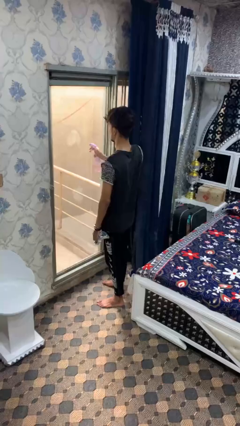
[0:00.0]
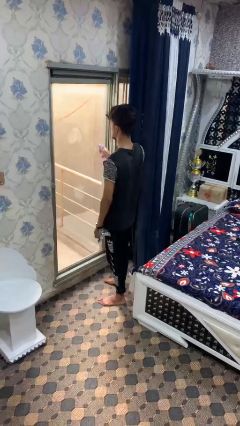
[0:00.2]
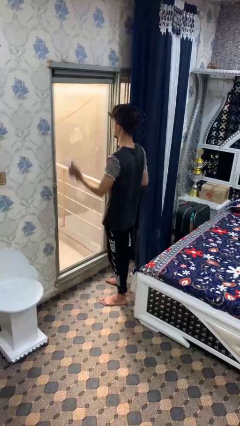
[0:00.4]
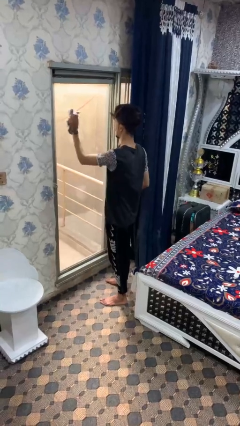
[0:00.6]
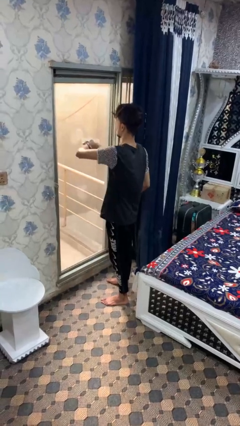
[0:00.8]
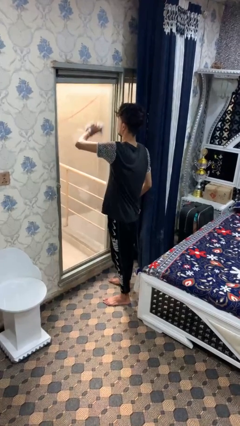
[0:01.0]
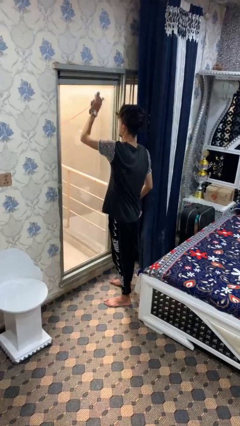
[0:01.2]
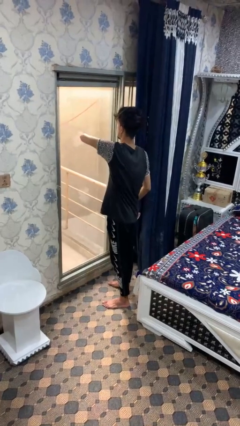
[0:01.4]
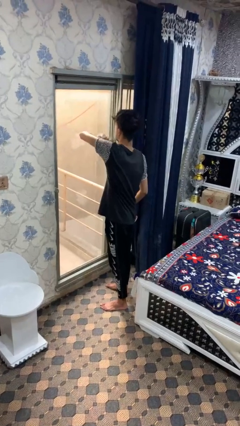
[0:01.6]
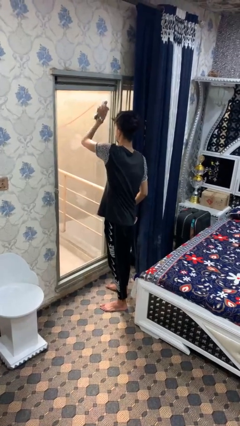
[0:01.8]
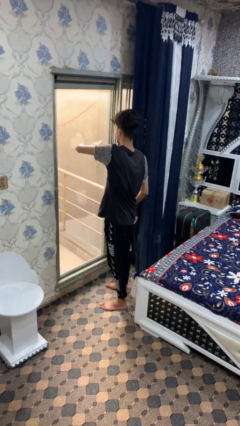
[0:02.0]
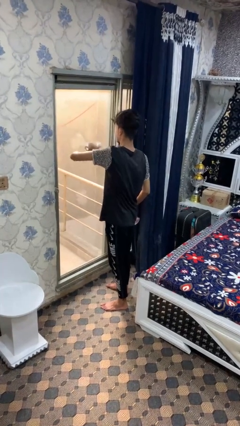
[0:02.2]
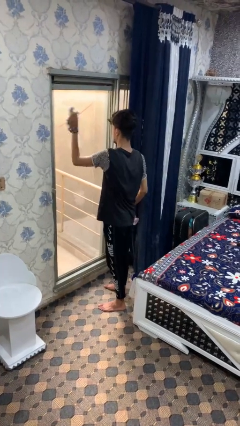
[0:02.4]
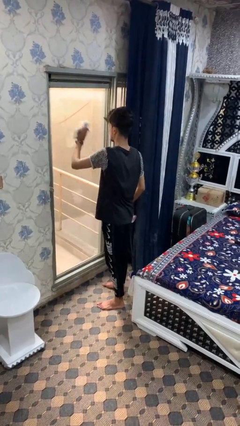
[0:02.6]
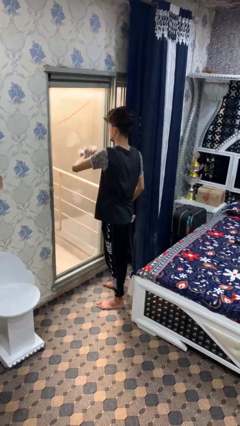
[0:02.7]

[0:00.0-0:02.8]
person washes window

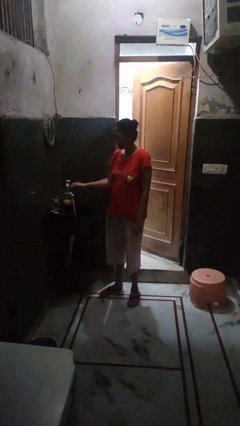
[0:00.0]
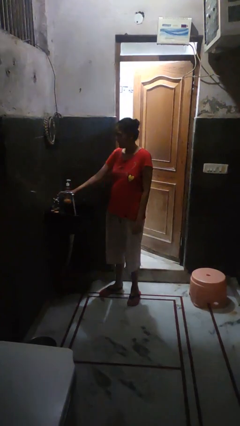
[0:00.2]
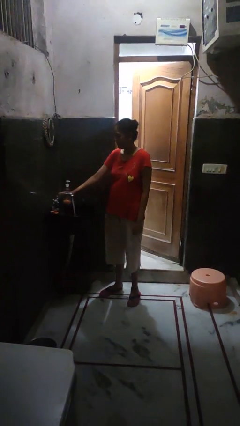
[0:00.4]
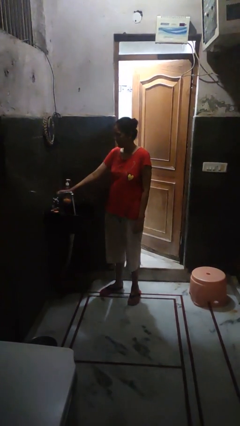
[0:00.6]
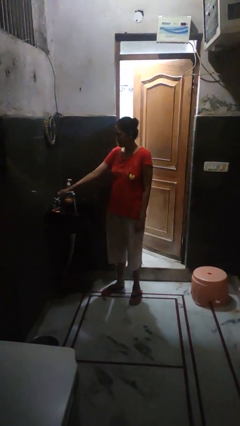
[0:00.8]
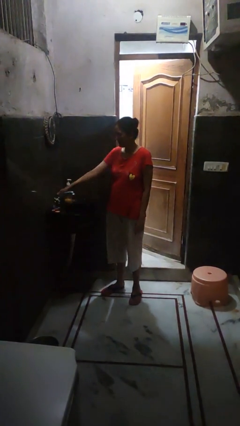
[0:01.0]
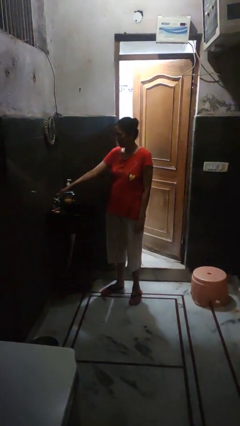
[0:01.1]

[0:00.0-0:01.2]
person turns off faucet

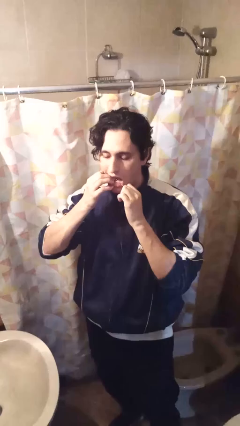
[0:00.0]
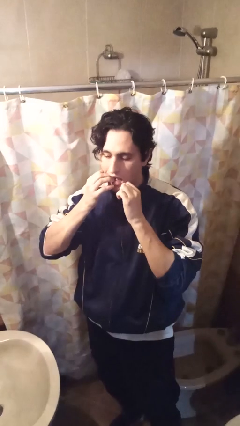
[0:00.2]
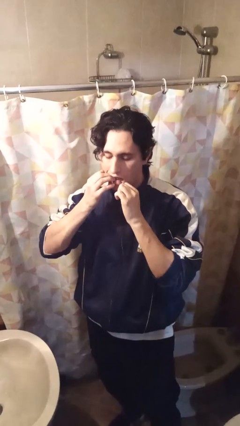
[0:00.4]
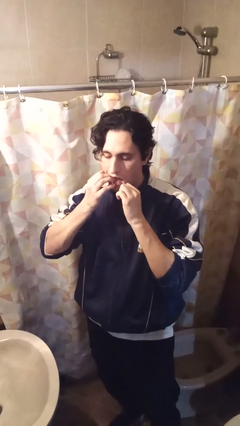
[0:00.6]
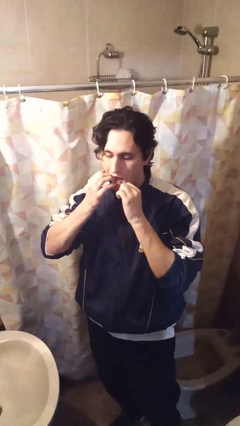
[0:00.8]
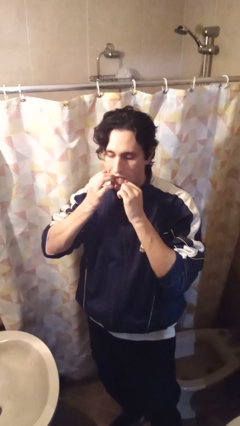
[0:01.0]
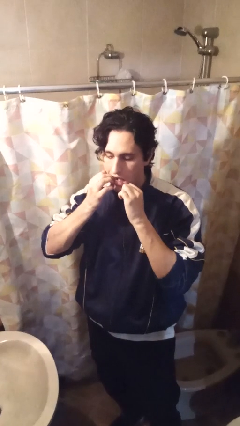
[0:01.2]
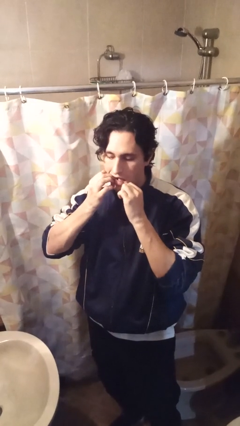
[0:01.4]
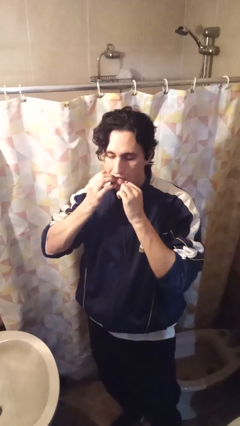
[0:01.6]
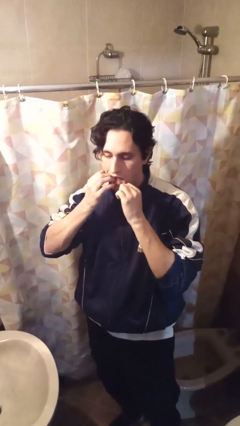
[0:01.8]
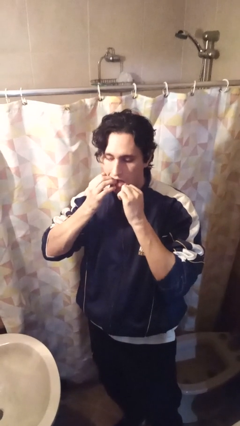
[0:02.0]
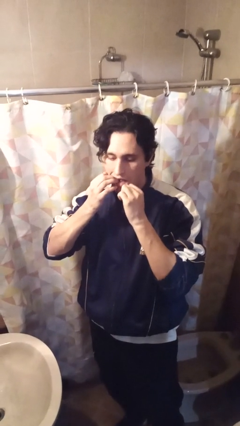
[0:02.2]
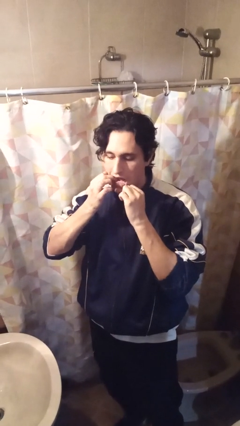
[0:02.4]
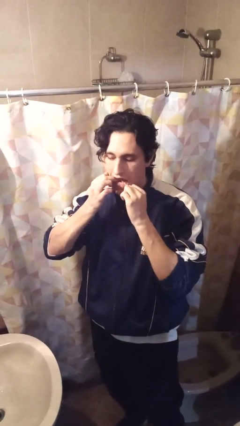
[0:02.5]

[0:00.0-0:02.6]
person flosses

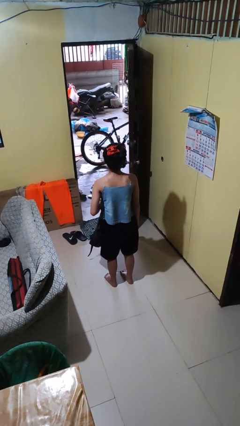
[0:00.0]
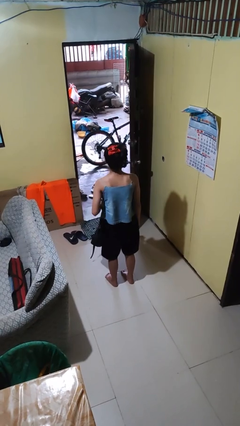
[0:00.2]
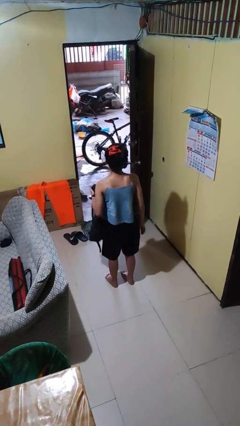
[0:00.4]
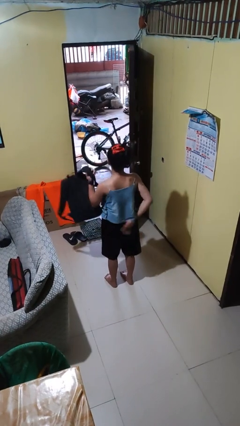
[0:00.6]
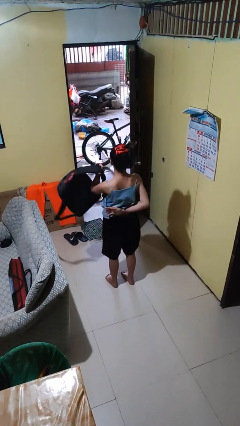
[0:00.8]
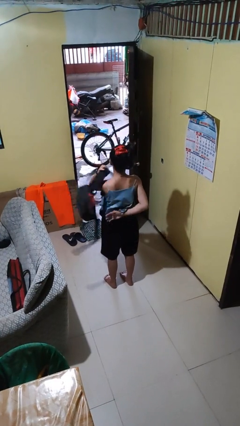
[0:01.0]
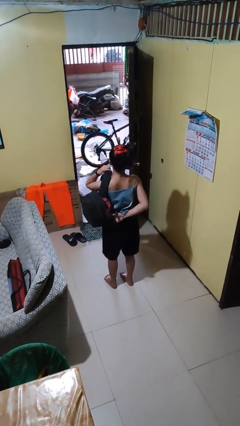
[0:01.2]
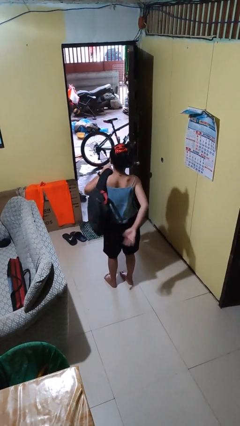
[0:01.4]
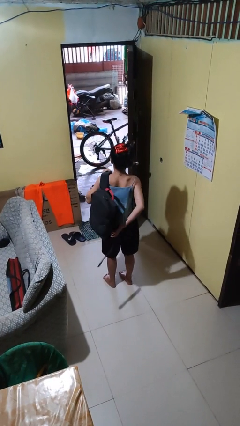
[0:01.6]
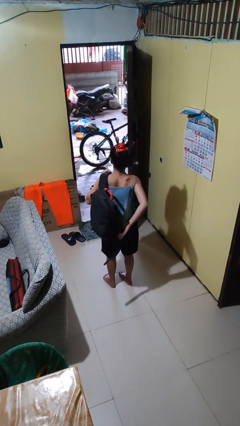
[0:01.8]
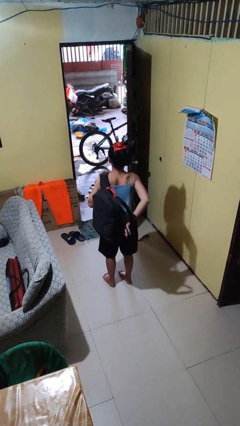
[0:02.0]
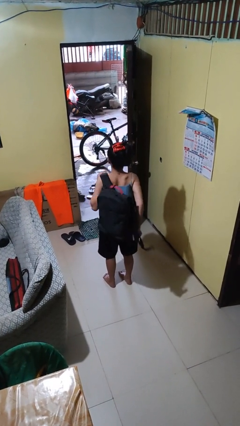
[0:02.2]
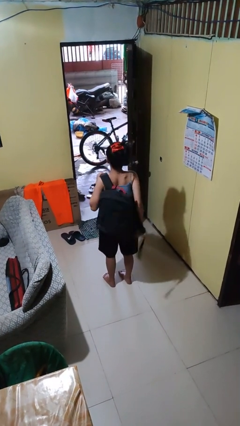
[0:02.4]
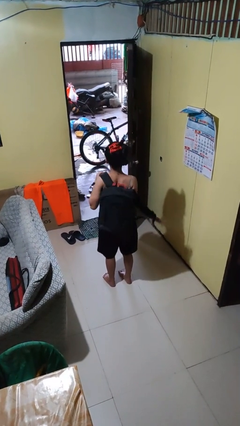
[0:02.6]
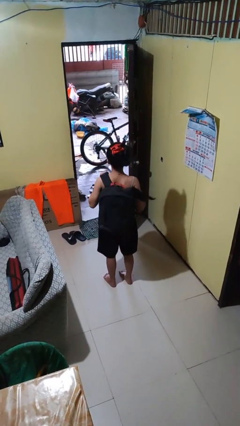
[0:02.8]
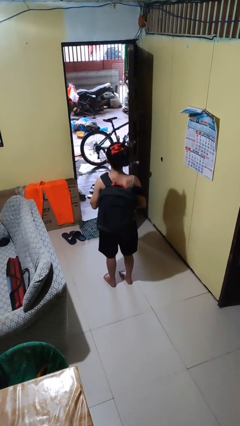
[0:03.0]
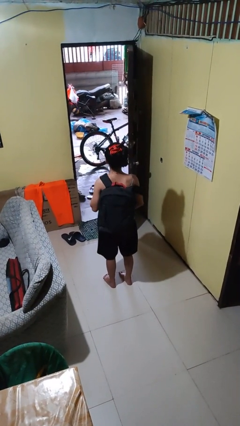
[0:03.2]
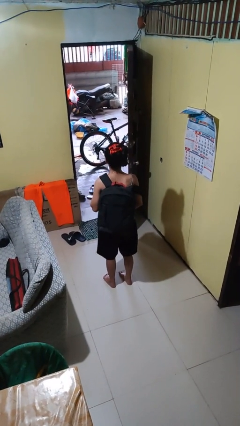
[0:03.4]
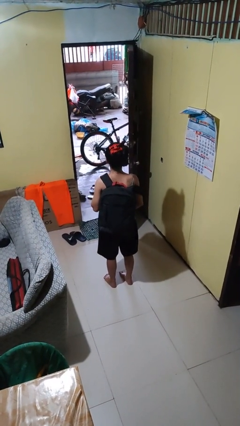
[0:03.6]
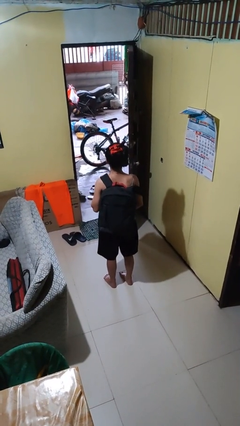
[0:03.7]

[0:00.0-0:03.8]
person puts on backpack

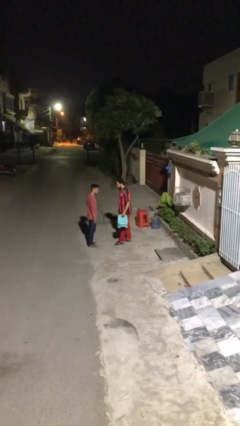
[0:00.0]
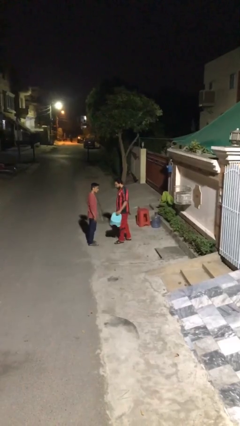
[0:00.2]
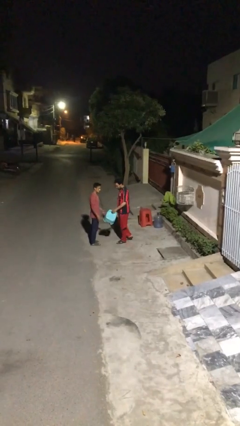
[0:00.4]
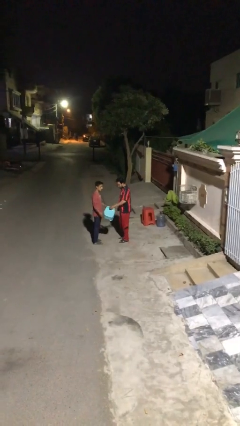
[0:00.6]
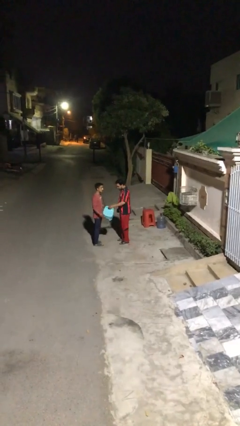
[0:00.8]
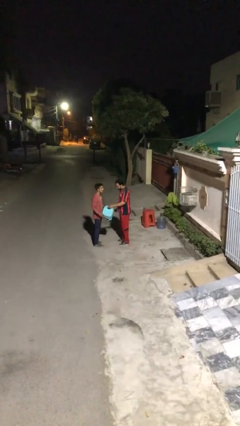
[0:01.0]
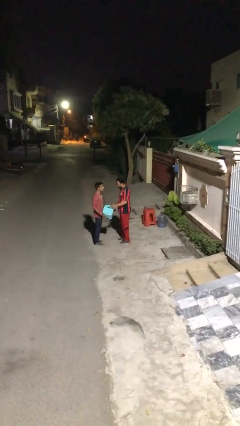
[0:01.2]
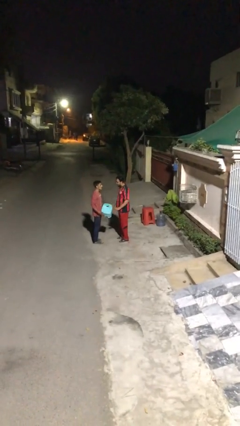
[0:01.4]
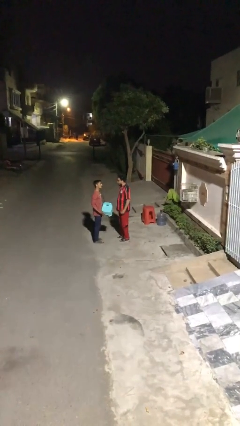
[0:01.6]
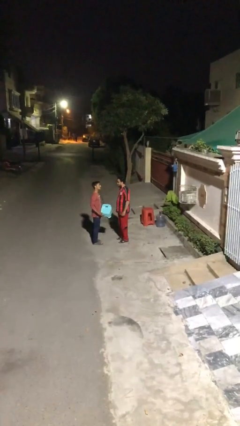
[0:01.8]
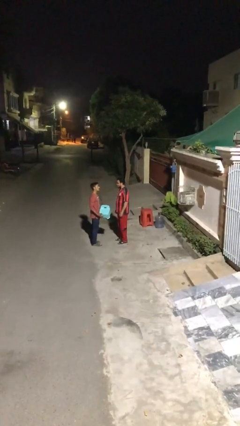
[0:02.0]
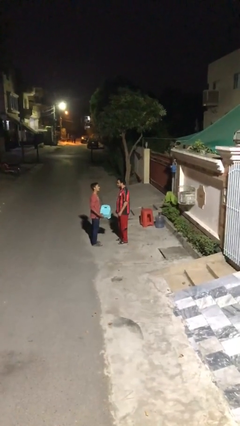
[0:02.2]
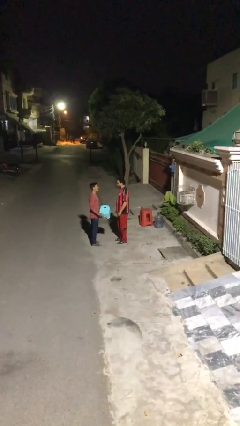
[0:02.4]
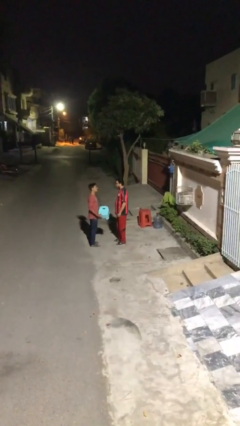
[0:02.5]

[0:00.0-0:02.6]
person transfers object to person

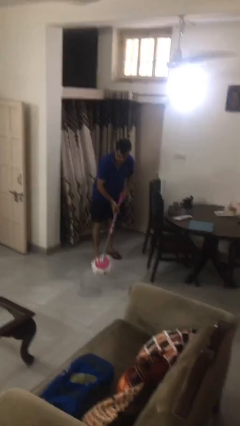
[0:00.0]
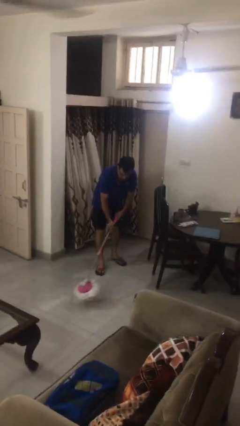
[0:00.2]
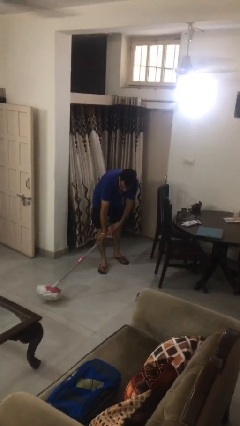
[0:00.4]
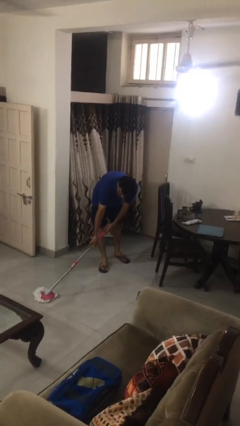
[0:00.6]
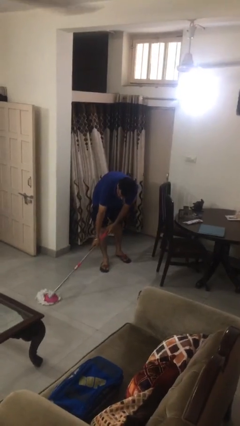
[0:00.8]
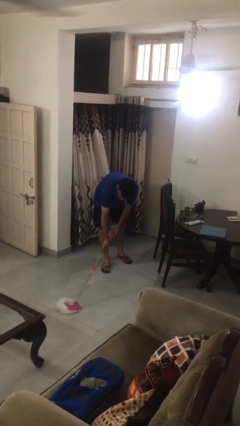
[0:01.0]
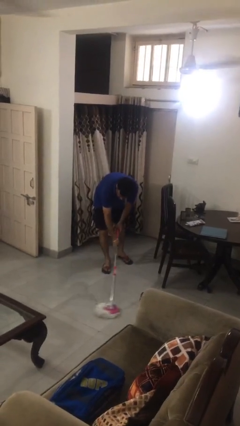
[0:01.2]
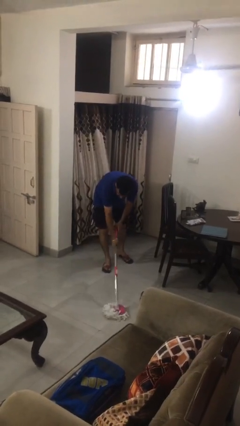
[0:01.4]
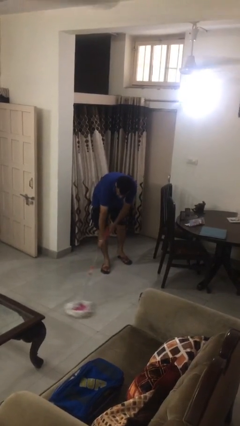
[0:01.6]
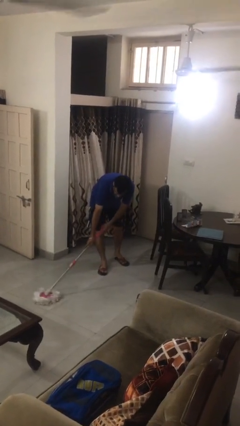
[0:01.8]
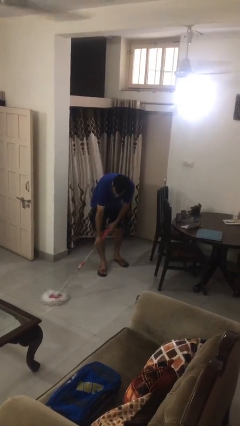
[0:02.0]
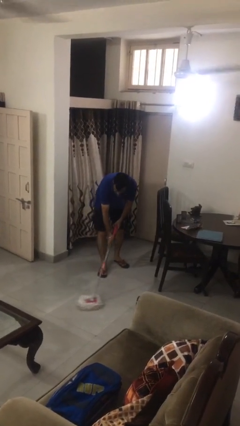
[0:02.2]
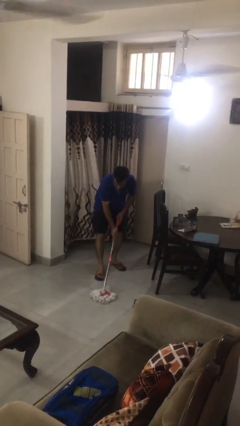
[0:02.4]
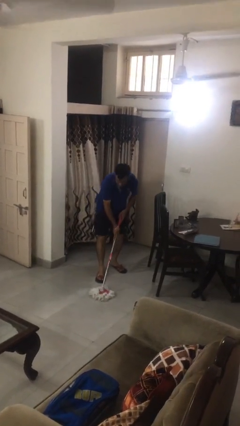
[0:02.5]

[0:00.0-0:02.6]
person mops

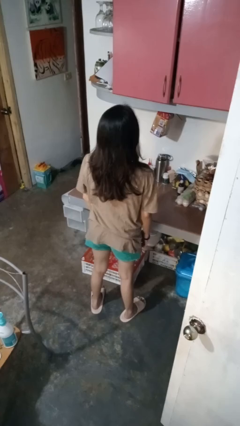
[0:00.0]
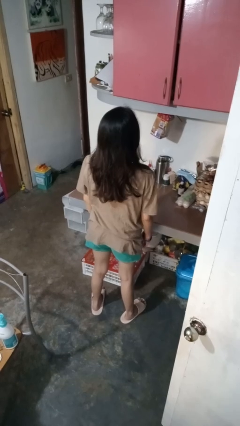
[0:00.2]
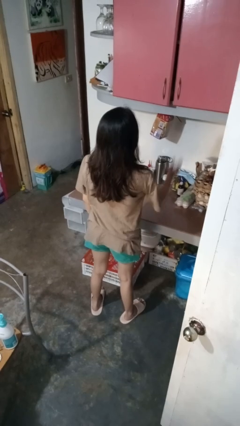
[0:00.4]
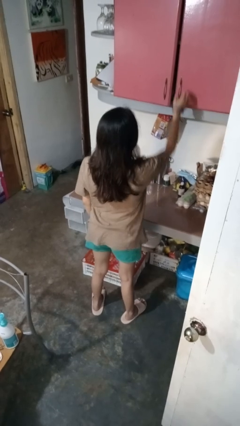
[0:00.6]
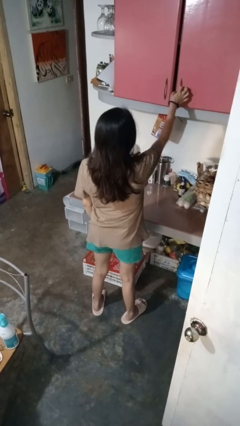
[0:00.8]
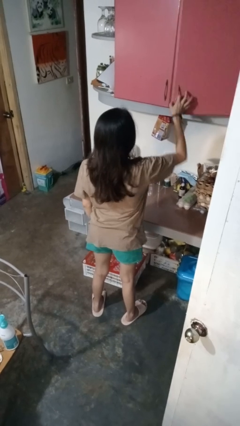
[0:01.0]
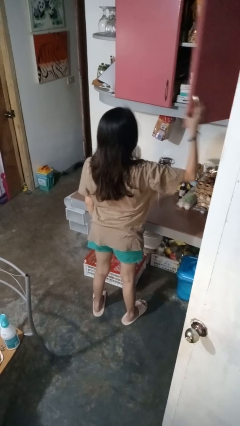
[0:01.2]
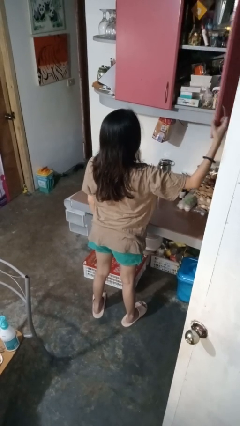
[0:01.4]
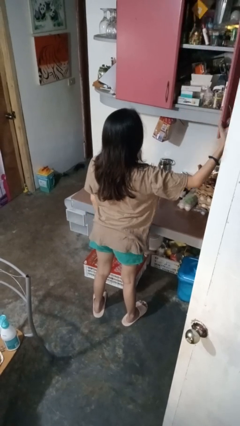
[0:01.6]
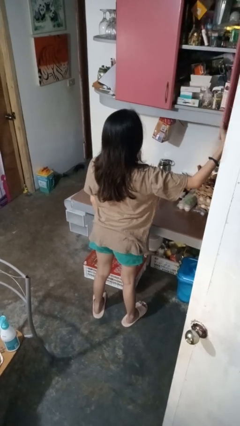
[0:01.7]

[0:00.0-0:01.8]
person opens cabinet
